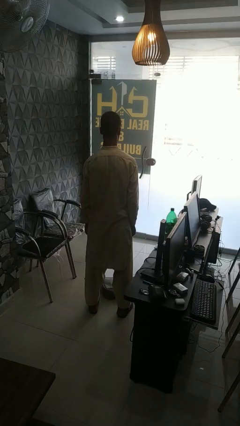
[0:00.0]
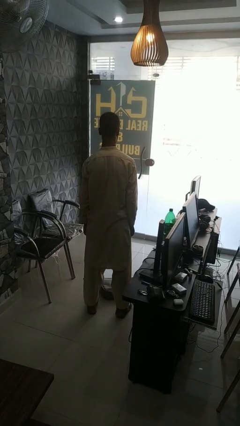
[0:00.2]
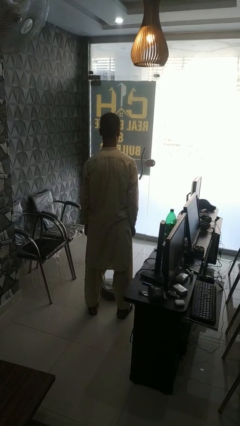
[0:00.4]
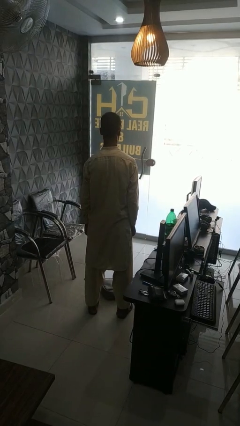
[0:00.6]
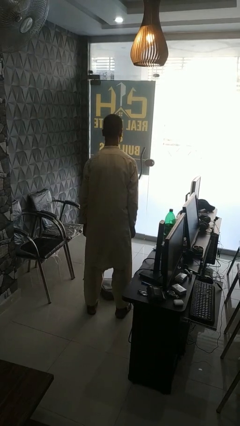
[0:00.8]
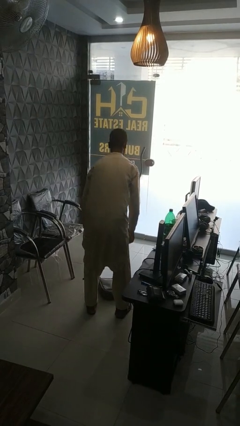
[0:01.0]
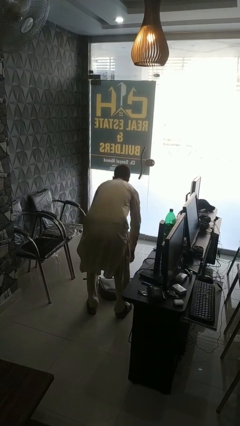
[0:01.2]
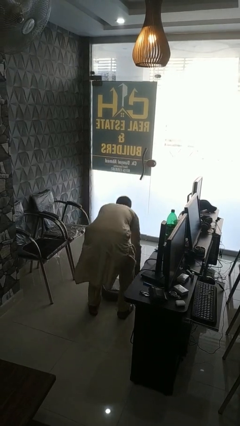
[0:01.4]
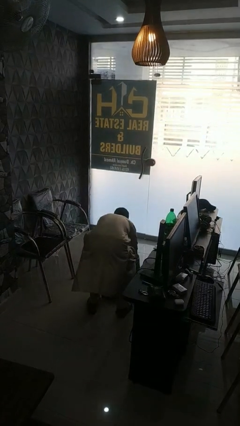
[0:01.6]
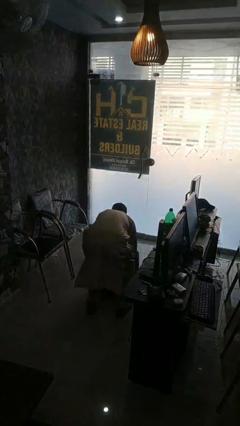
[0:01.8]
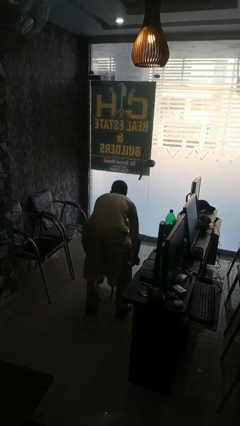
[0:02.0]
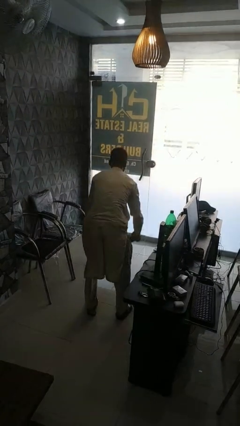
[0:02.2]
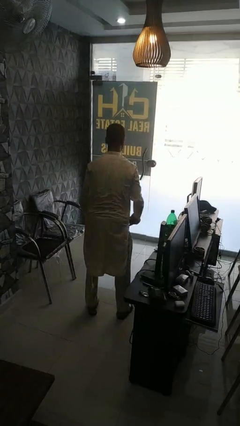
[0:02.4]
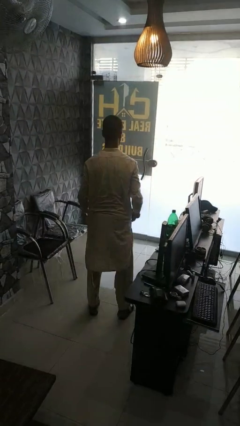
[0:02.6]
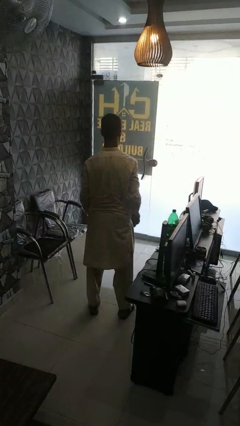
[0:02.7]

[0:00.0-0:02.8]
person picks up object from floor

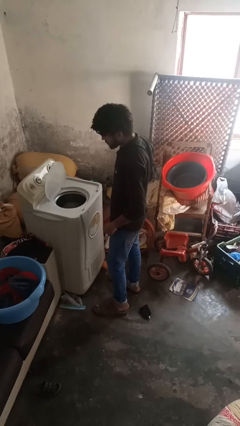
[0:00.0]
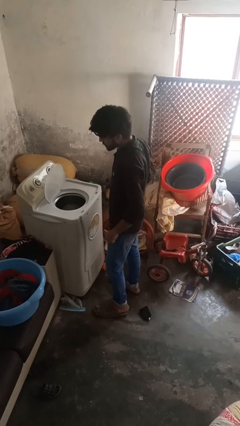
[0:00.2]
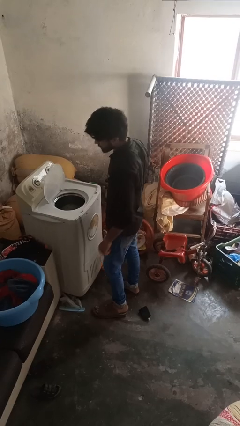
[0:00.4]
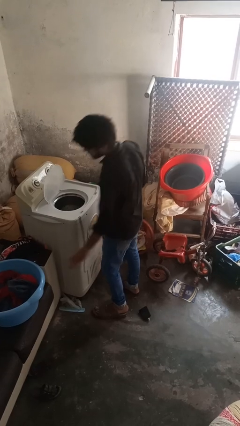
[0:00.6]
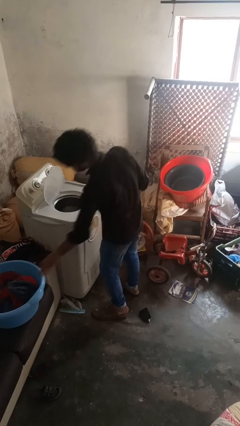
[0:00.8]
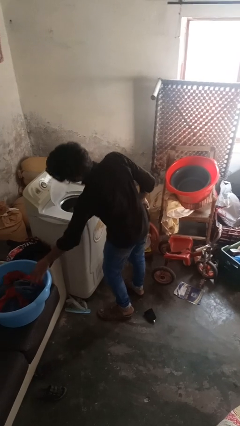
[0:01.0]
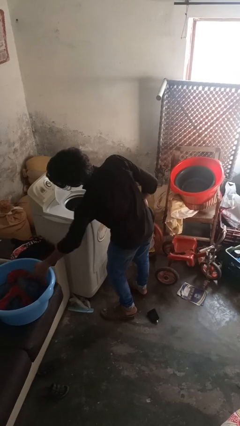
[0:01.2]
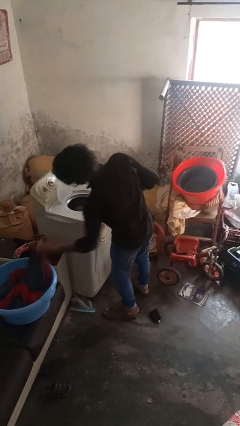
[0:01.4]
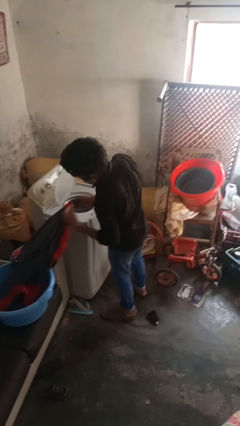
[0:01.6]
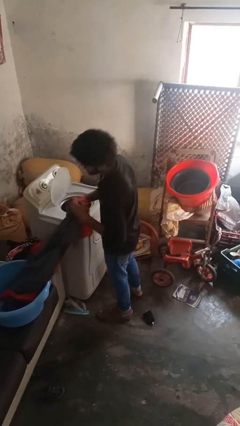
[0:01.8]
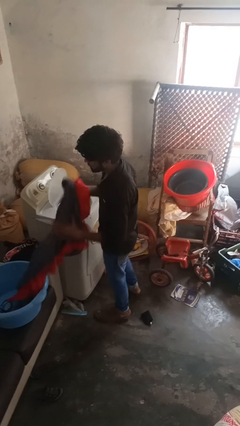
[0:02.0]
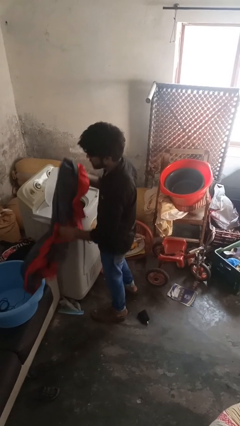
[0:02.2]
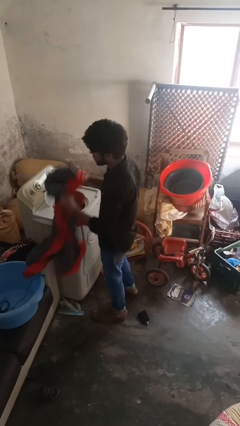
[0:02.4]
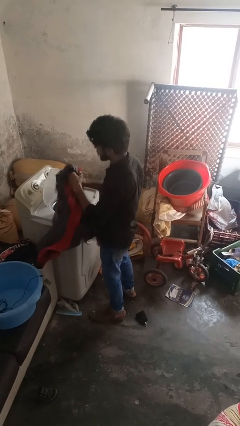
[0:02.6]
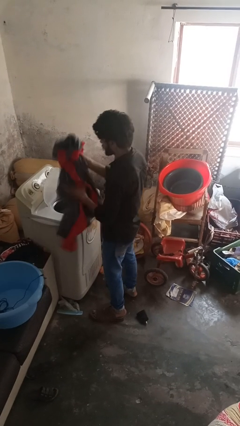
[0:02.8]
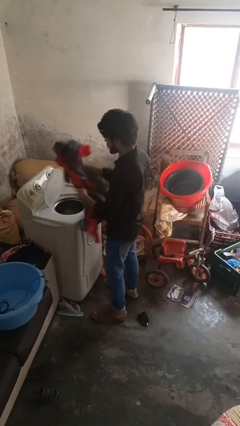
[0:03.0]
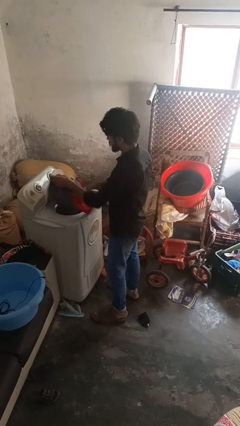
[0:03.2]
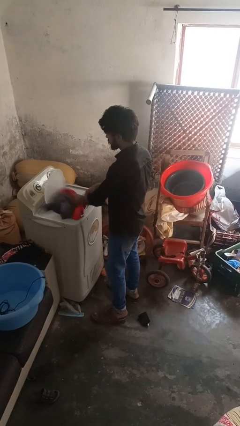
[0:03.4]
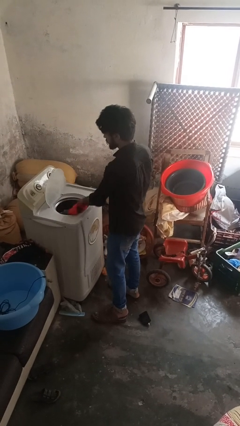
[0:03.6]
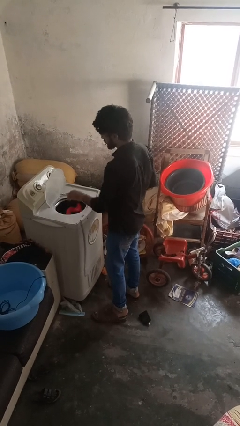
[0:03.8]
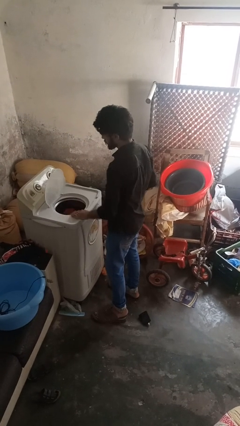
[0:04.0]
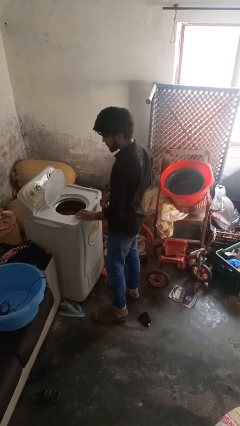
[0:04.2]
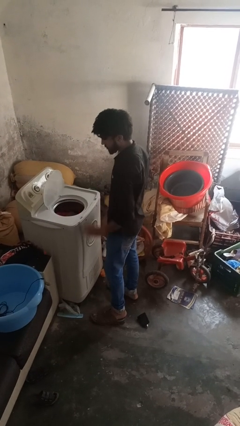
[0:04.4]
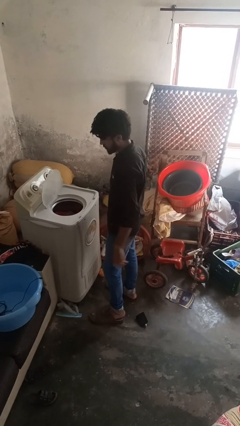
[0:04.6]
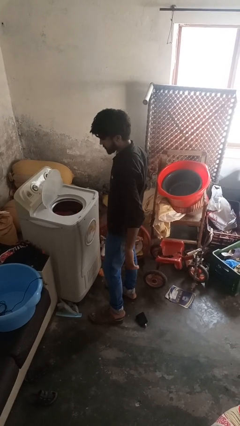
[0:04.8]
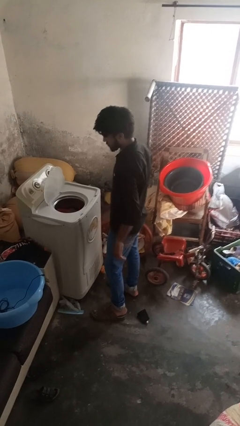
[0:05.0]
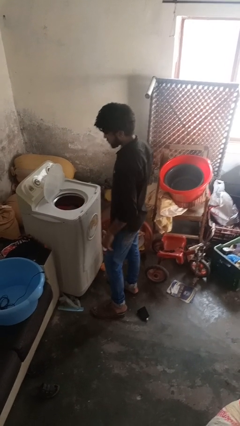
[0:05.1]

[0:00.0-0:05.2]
person loads clotheswasher

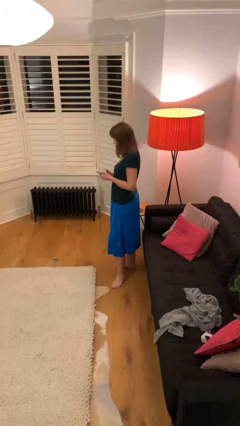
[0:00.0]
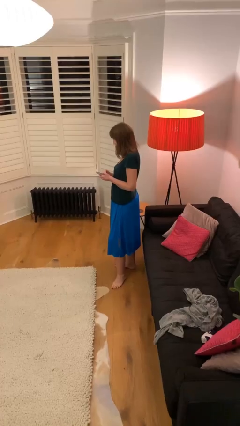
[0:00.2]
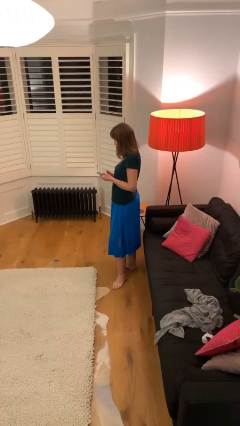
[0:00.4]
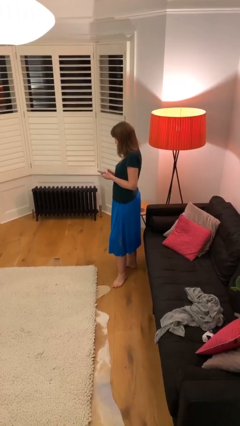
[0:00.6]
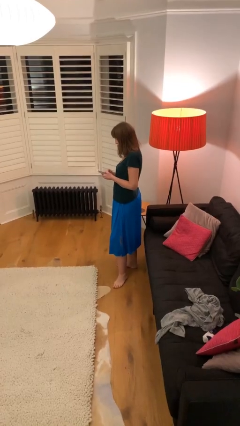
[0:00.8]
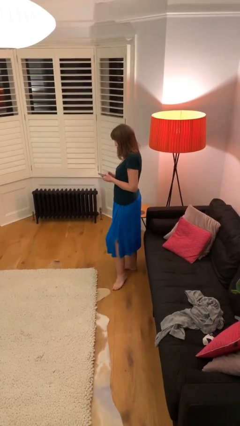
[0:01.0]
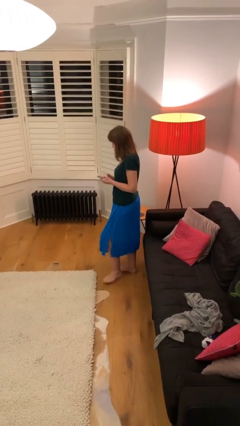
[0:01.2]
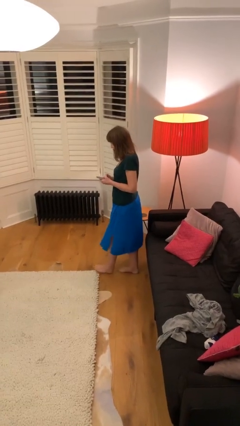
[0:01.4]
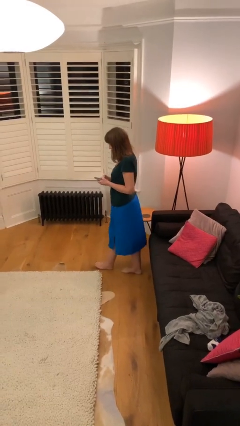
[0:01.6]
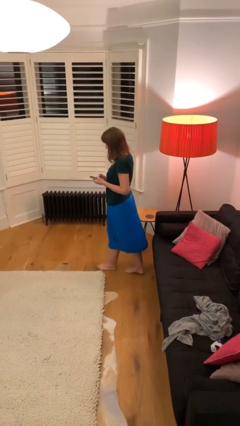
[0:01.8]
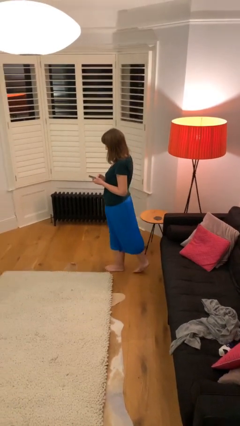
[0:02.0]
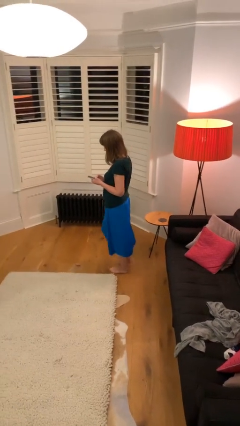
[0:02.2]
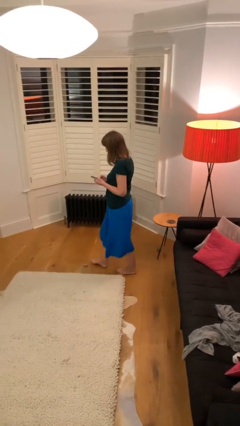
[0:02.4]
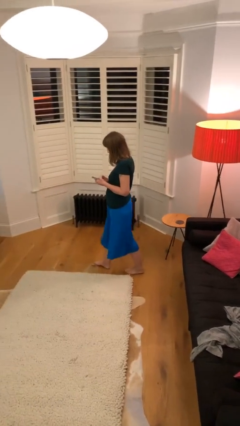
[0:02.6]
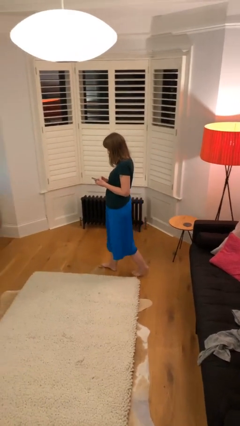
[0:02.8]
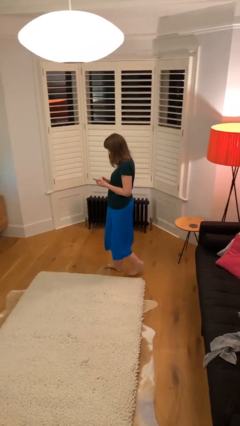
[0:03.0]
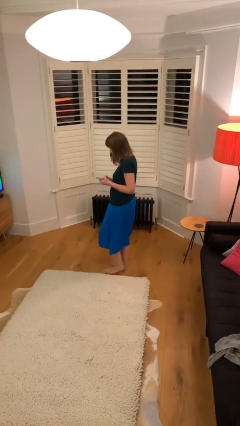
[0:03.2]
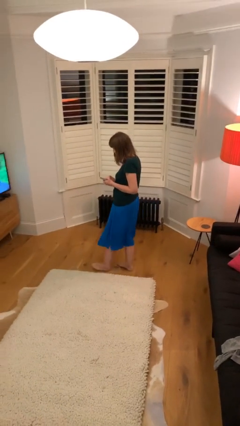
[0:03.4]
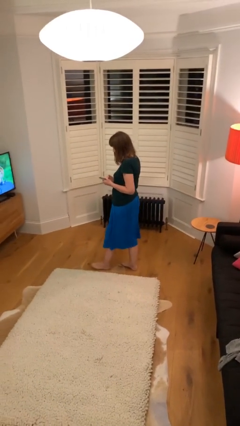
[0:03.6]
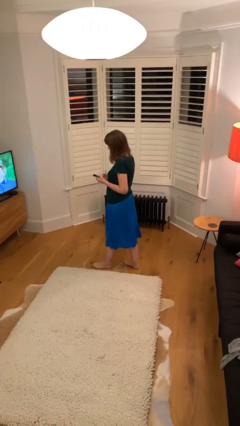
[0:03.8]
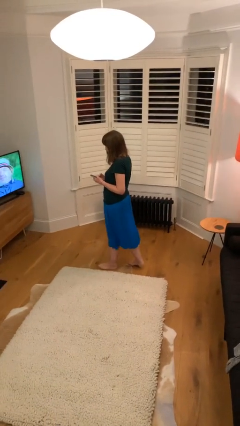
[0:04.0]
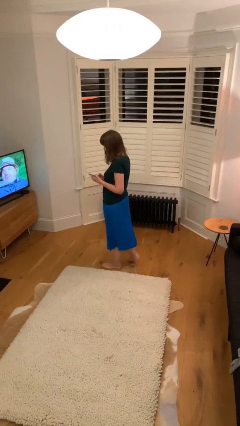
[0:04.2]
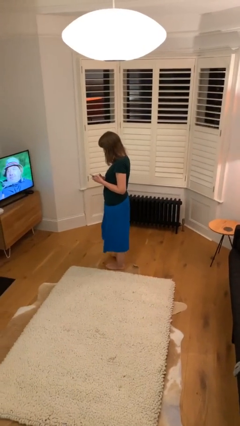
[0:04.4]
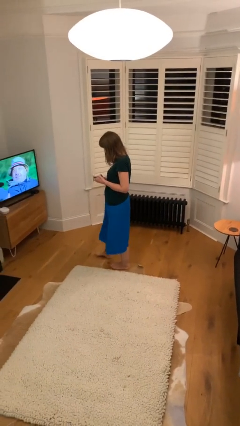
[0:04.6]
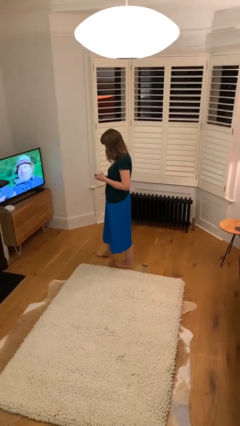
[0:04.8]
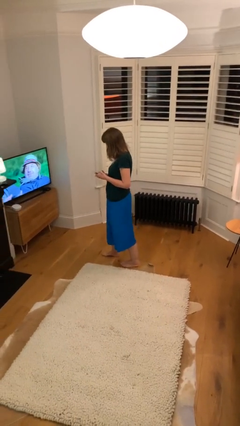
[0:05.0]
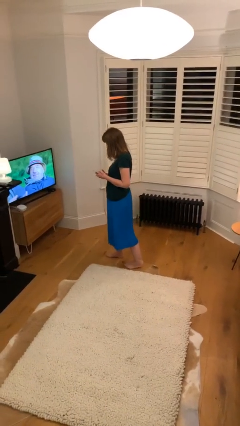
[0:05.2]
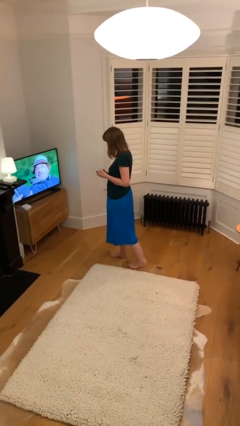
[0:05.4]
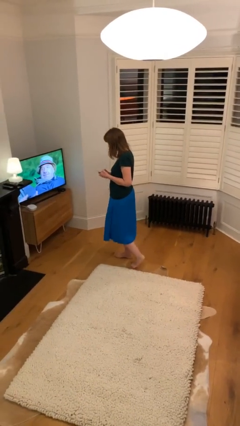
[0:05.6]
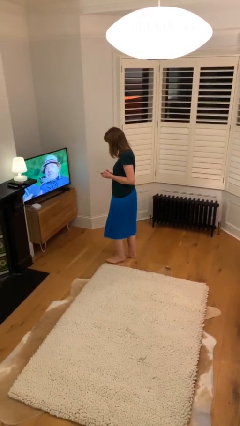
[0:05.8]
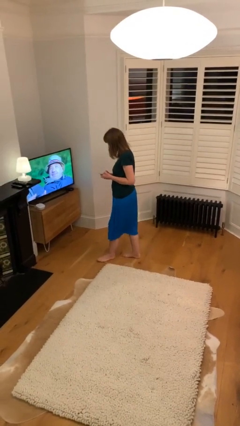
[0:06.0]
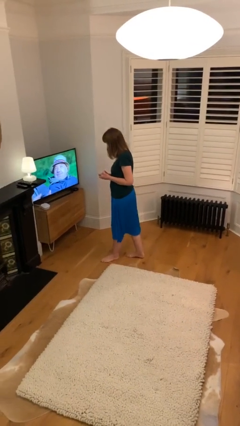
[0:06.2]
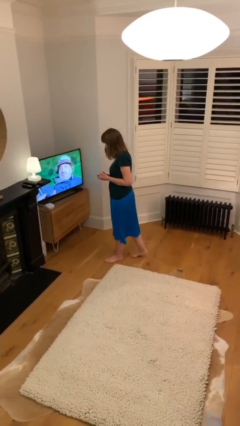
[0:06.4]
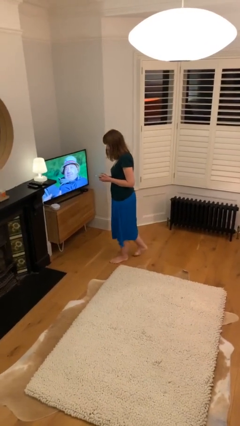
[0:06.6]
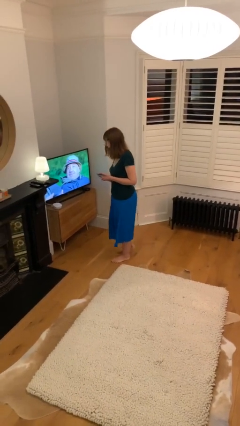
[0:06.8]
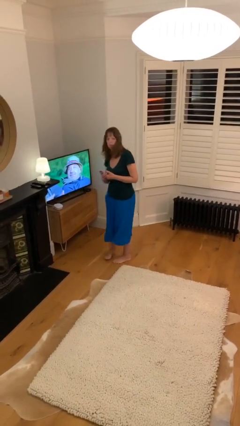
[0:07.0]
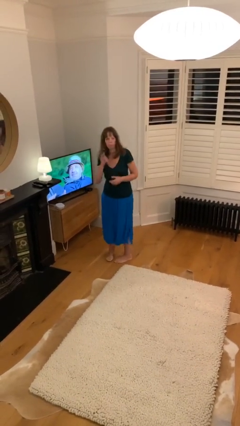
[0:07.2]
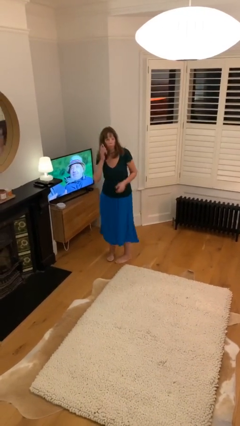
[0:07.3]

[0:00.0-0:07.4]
person texts on phone

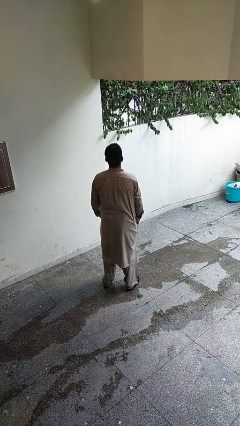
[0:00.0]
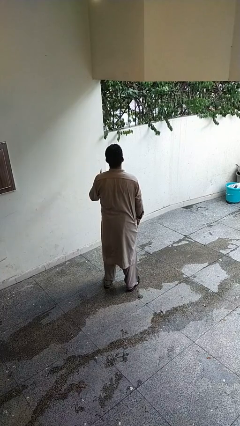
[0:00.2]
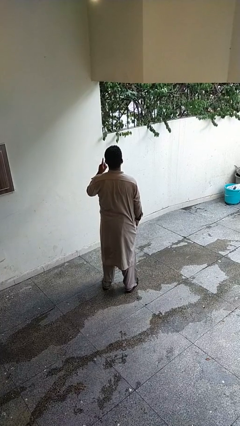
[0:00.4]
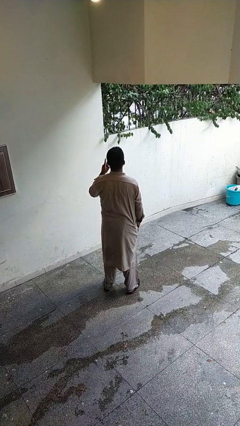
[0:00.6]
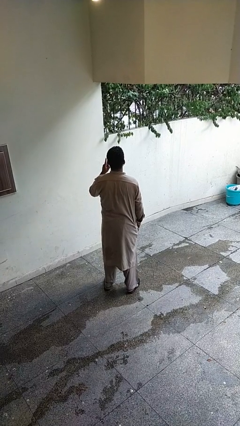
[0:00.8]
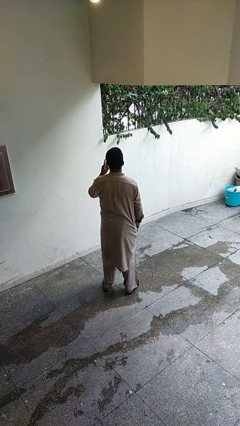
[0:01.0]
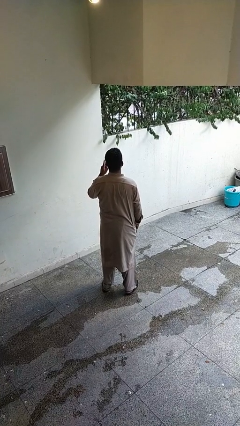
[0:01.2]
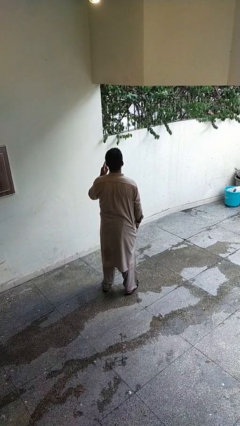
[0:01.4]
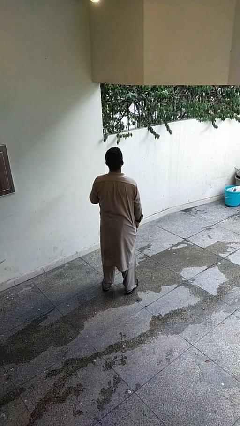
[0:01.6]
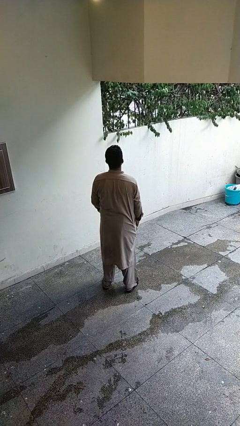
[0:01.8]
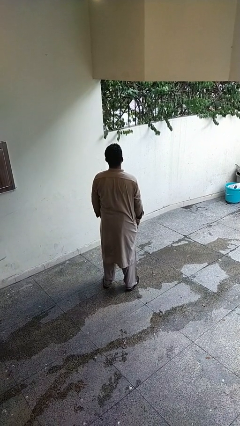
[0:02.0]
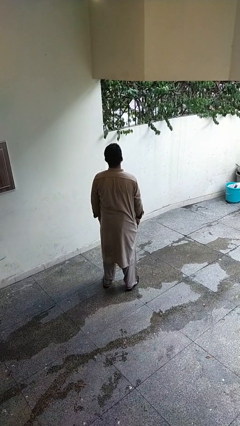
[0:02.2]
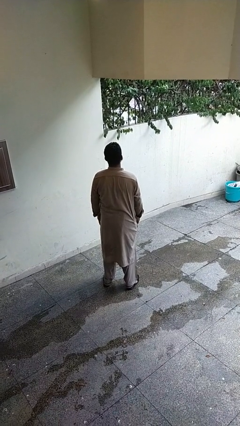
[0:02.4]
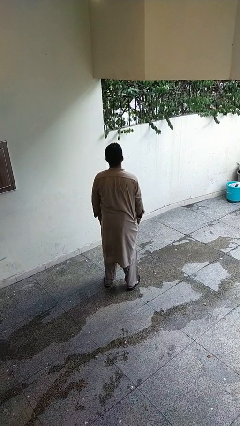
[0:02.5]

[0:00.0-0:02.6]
person gestures number one
